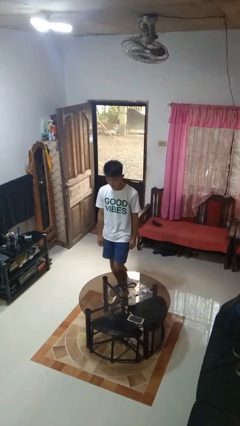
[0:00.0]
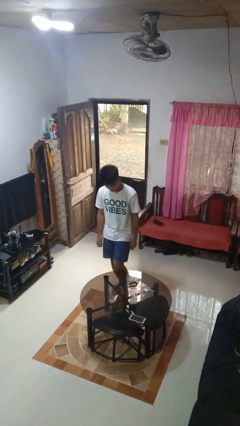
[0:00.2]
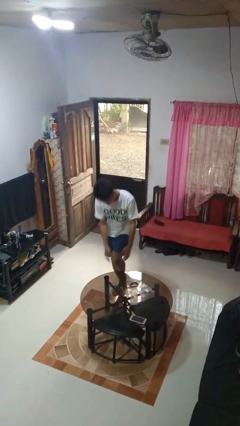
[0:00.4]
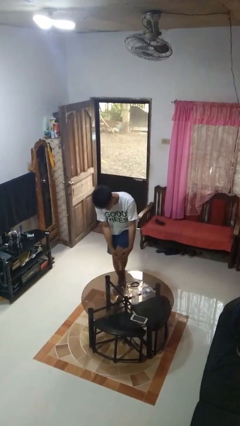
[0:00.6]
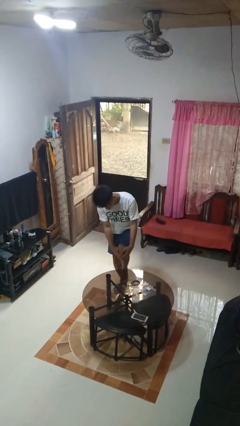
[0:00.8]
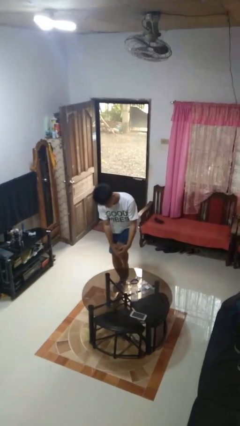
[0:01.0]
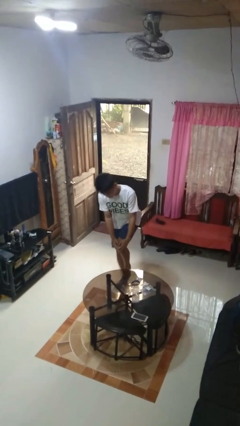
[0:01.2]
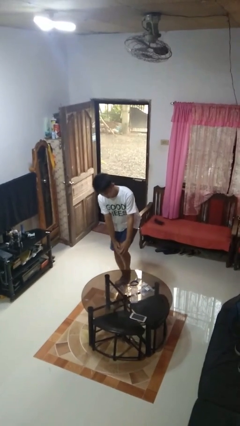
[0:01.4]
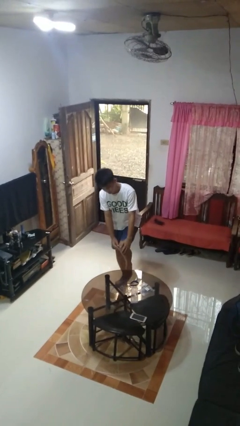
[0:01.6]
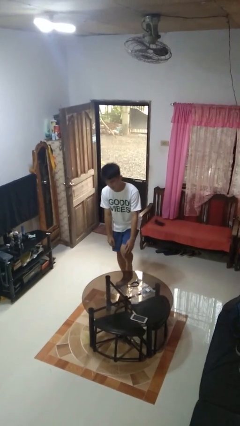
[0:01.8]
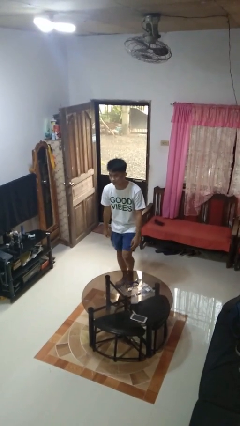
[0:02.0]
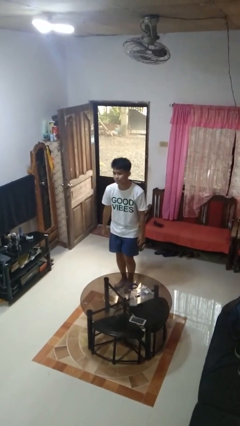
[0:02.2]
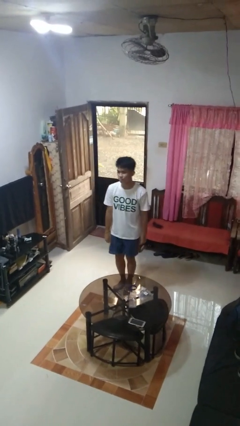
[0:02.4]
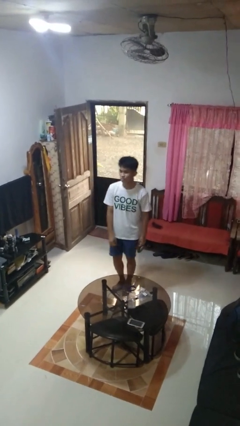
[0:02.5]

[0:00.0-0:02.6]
person bumps into table

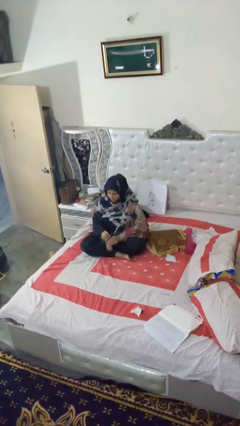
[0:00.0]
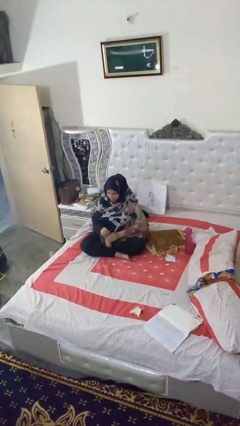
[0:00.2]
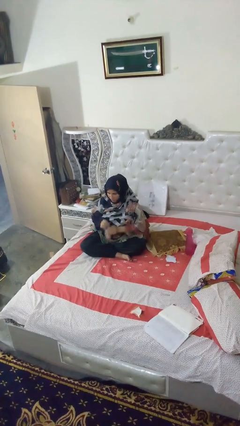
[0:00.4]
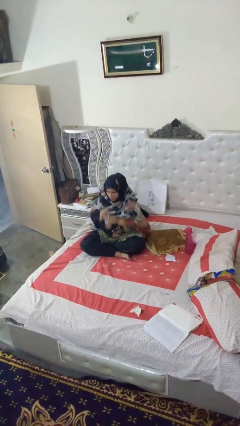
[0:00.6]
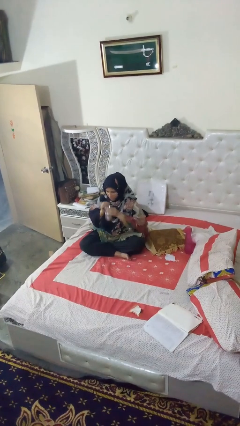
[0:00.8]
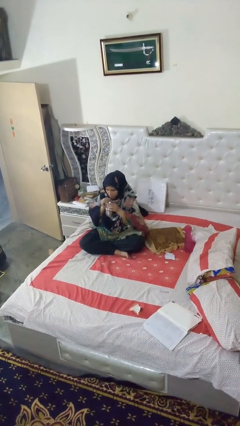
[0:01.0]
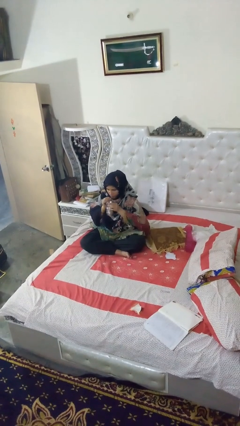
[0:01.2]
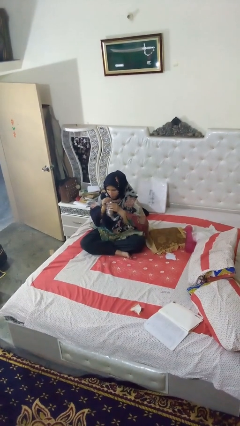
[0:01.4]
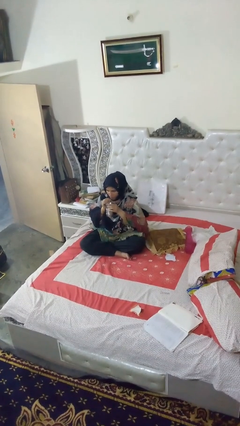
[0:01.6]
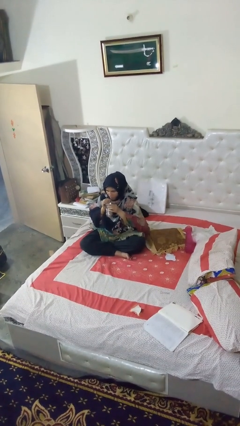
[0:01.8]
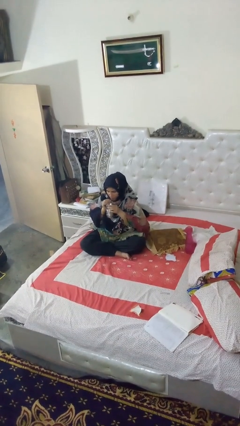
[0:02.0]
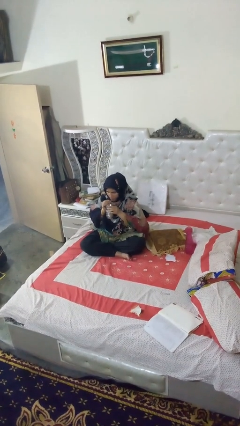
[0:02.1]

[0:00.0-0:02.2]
person drinks from straw

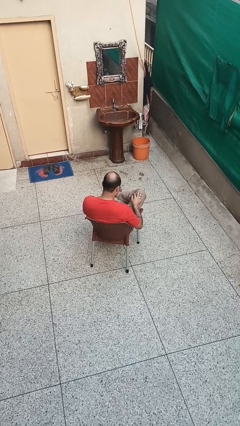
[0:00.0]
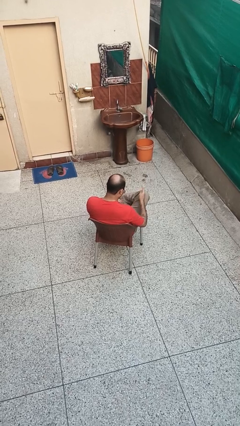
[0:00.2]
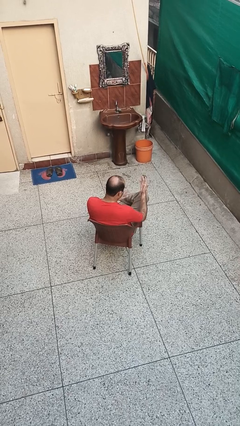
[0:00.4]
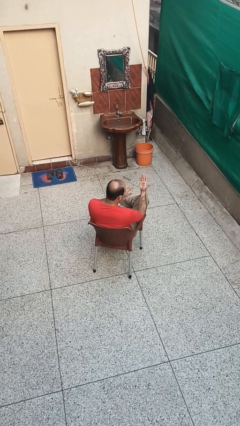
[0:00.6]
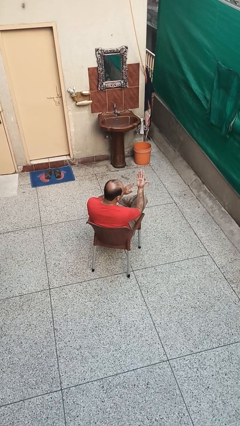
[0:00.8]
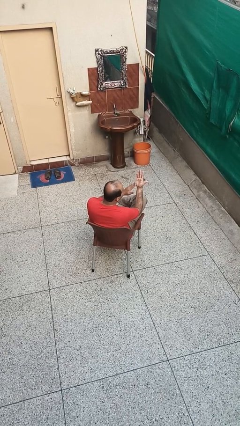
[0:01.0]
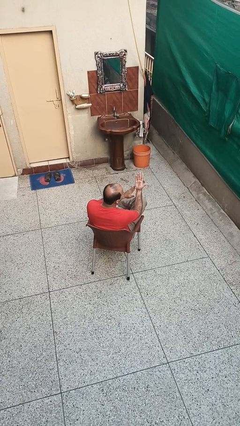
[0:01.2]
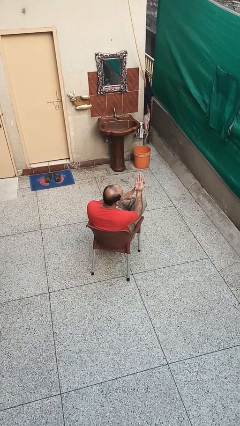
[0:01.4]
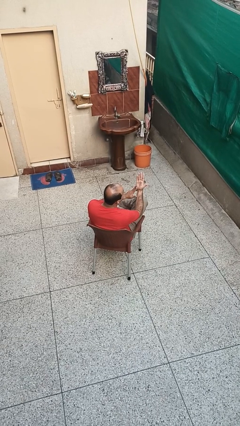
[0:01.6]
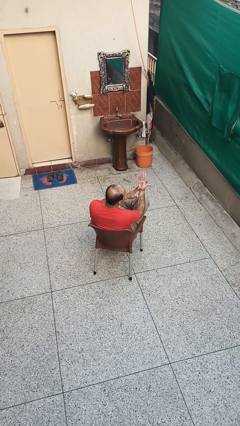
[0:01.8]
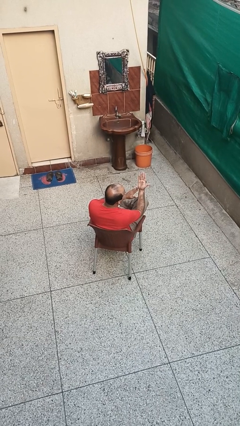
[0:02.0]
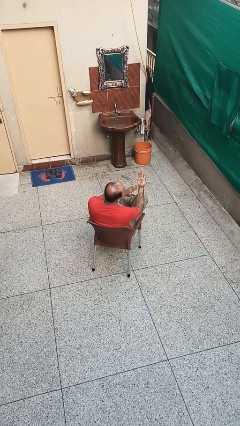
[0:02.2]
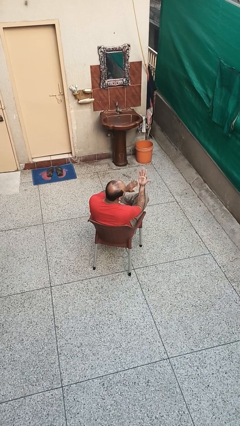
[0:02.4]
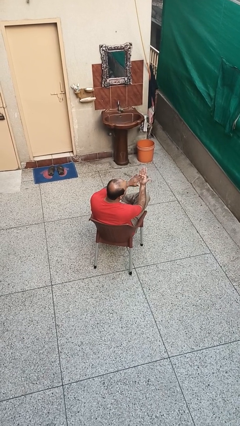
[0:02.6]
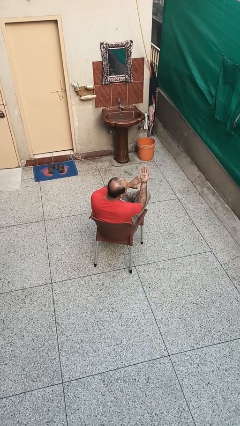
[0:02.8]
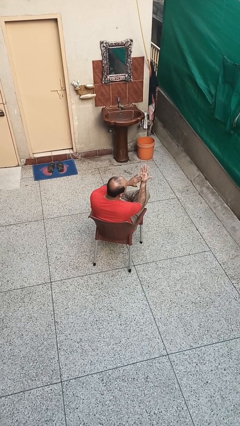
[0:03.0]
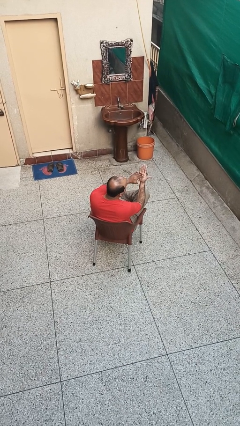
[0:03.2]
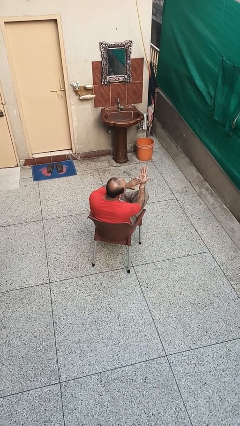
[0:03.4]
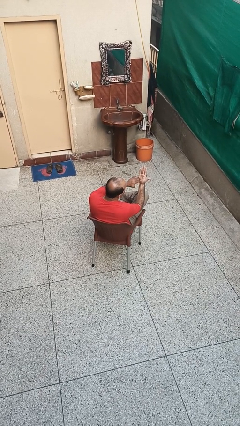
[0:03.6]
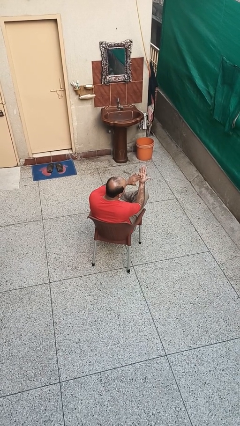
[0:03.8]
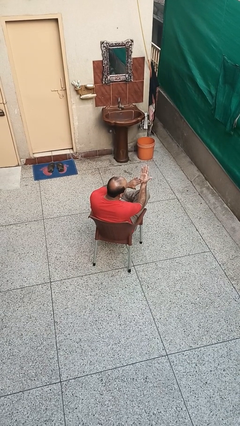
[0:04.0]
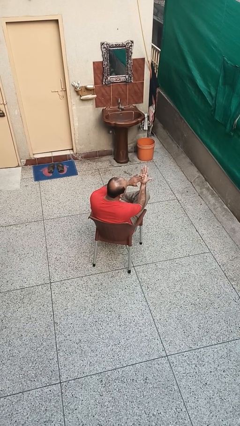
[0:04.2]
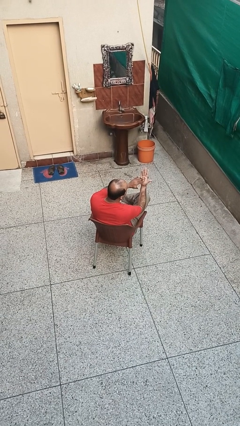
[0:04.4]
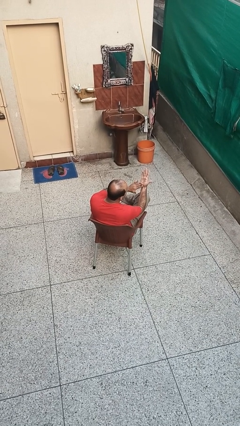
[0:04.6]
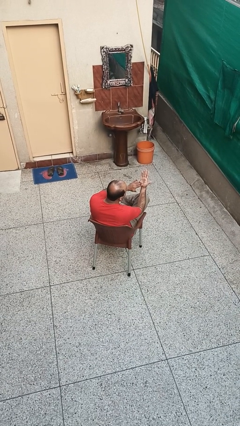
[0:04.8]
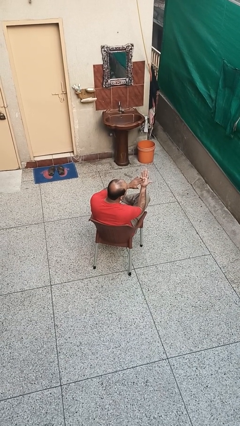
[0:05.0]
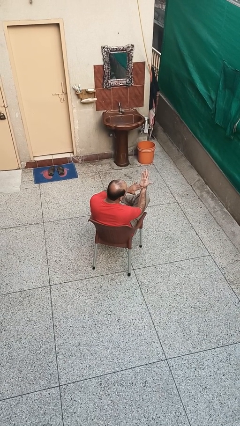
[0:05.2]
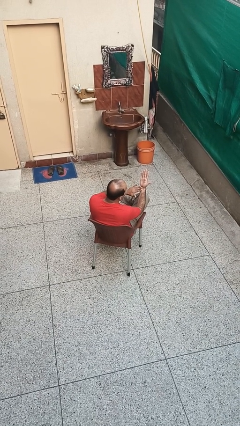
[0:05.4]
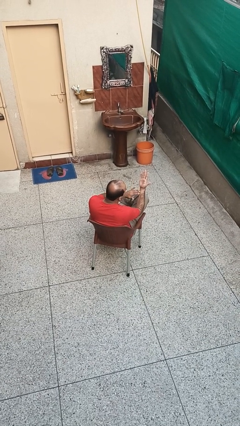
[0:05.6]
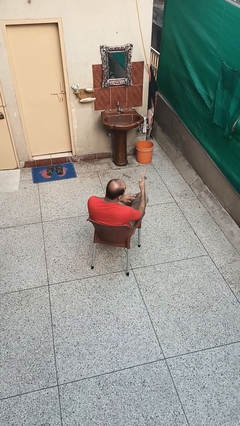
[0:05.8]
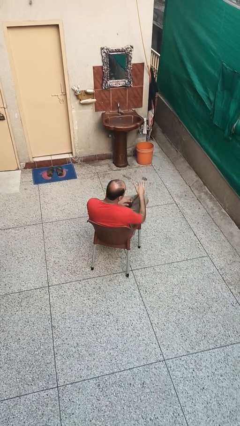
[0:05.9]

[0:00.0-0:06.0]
person looks at hands in lap

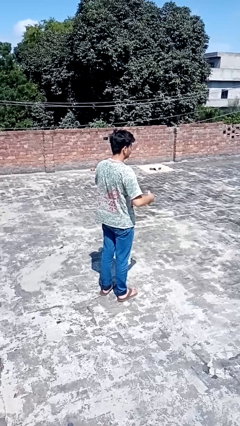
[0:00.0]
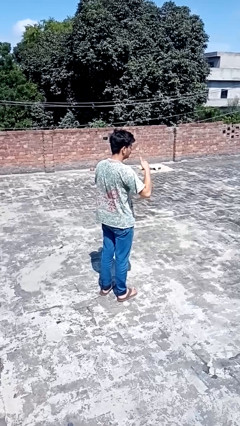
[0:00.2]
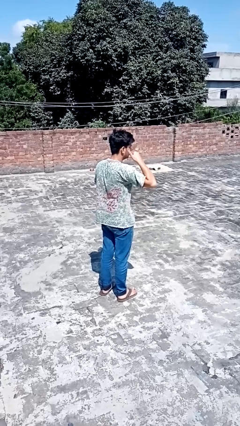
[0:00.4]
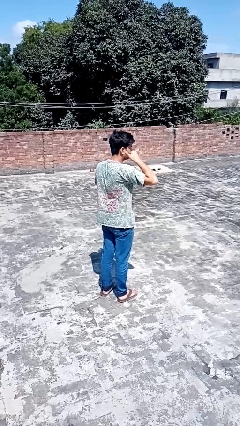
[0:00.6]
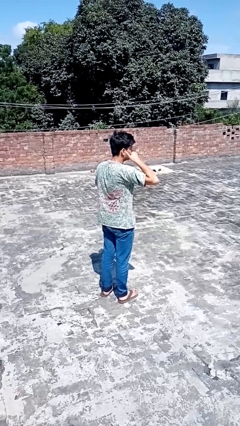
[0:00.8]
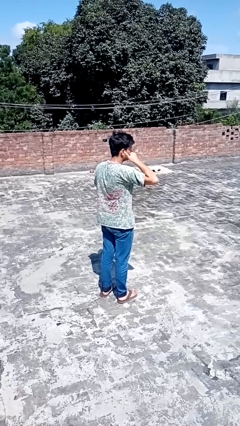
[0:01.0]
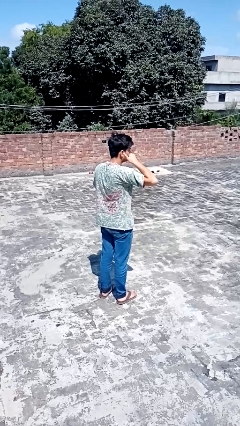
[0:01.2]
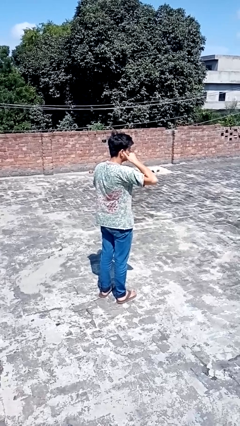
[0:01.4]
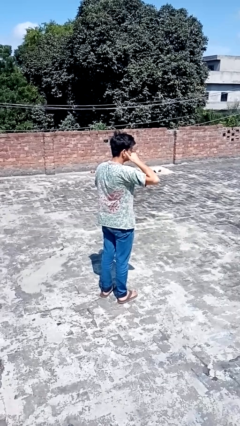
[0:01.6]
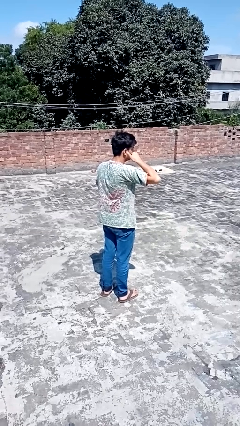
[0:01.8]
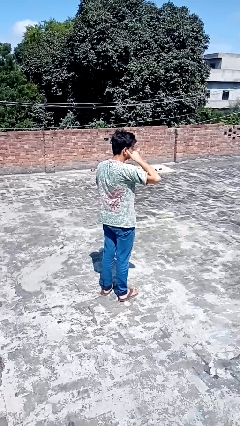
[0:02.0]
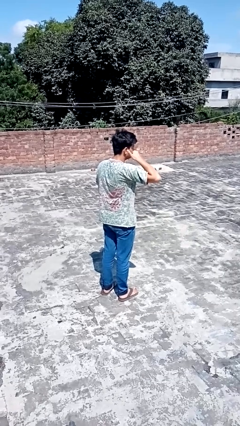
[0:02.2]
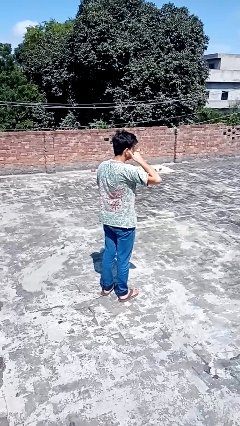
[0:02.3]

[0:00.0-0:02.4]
person gestures call me

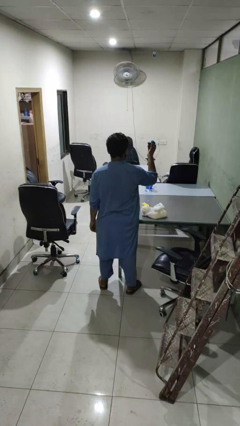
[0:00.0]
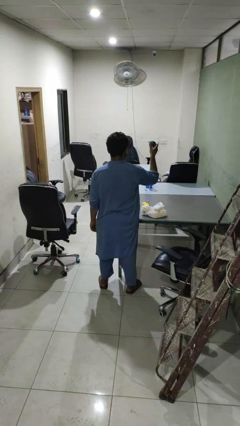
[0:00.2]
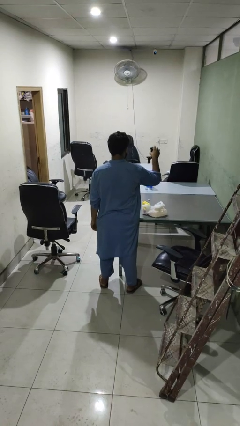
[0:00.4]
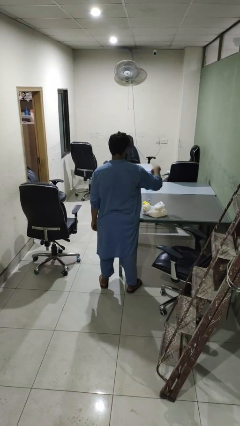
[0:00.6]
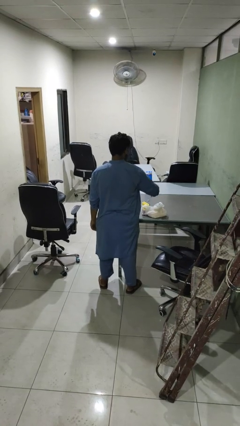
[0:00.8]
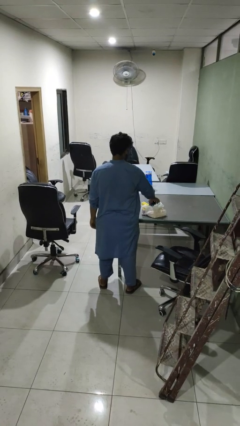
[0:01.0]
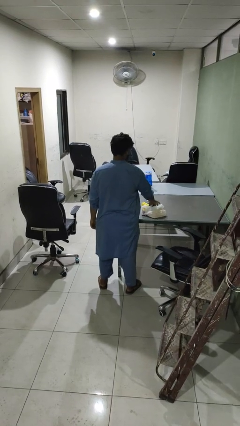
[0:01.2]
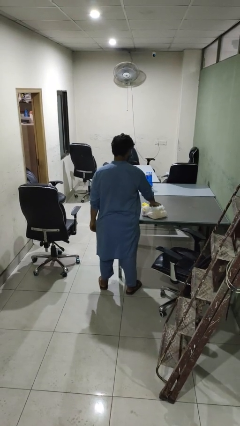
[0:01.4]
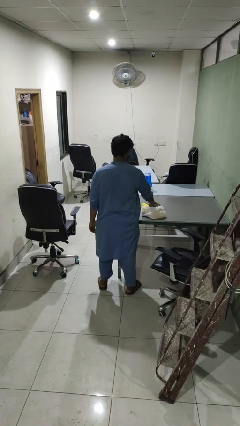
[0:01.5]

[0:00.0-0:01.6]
person puts object into bag

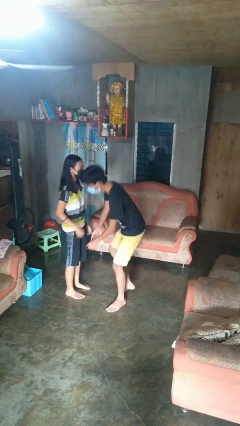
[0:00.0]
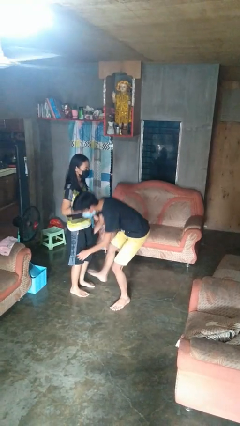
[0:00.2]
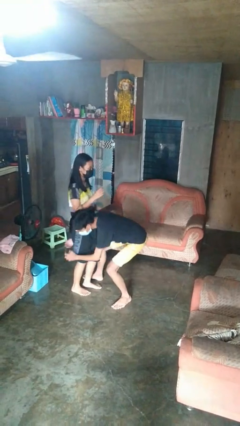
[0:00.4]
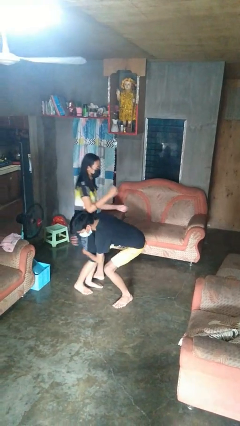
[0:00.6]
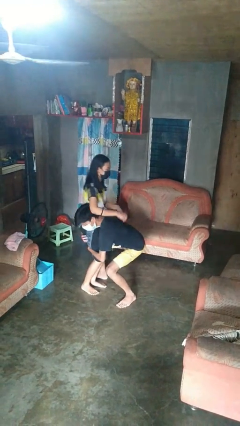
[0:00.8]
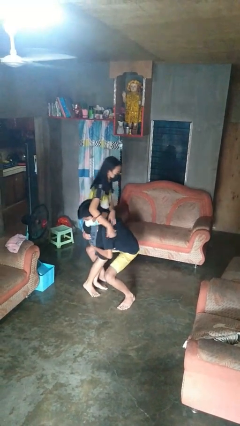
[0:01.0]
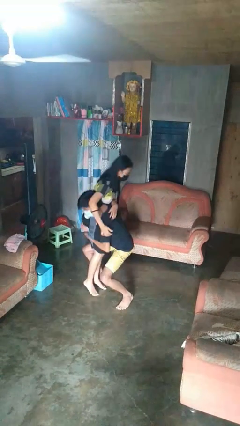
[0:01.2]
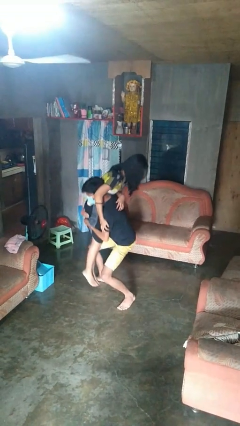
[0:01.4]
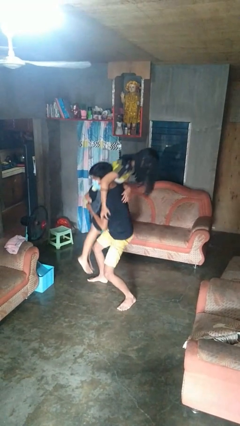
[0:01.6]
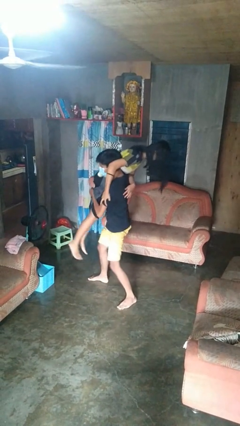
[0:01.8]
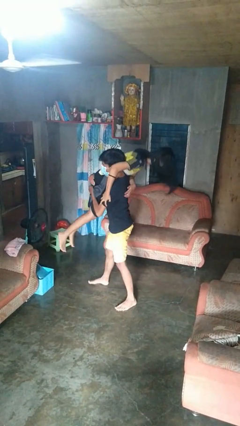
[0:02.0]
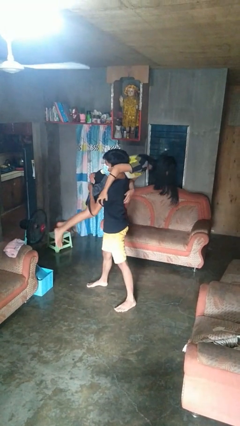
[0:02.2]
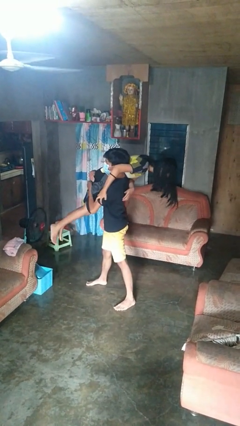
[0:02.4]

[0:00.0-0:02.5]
person carries person over shoulder

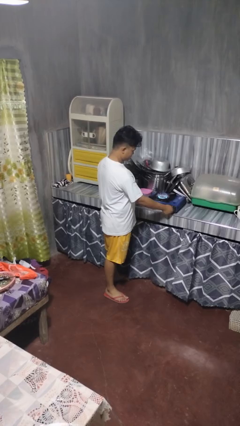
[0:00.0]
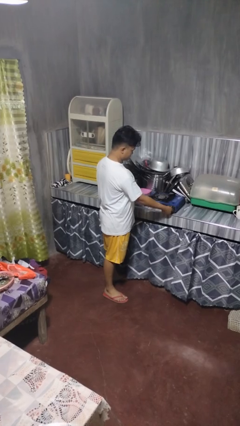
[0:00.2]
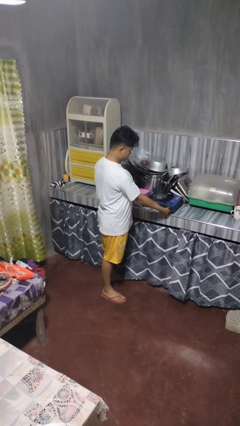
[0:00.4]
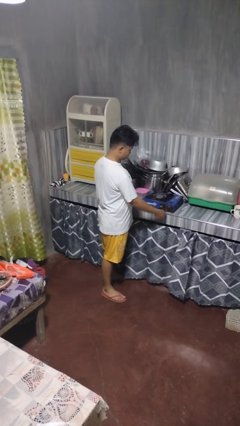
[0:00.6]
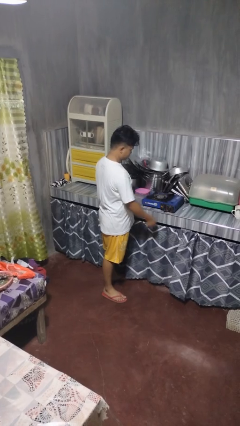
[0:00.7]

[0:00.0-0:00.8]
person turns off stovetop
